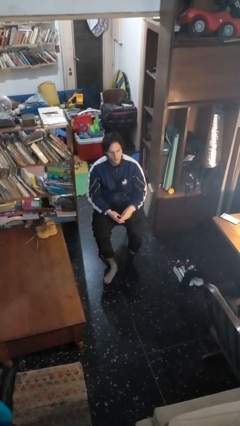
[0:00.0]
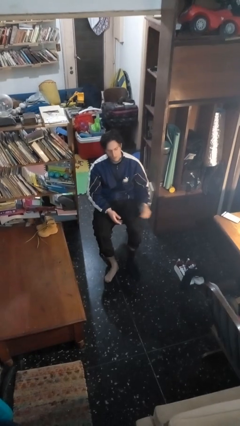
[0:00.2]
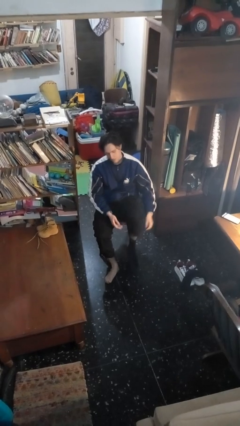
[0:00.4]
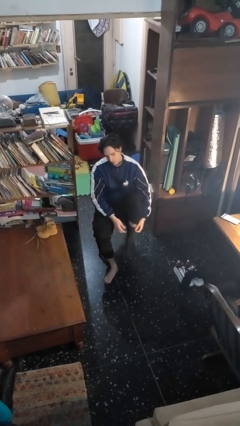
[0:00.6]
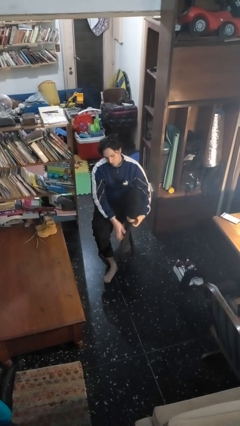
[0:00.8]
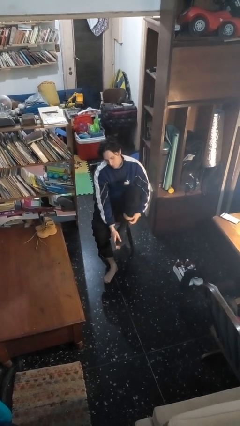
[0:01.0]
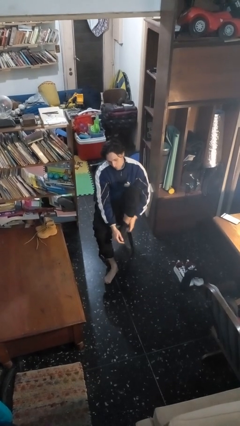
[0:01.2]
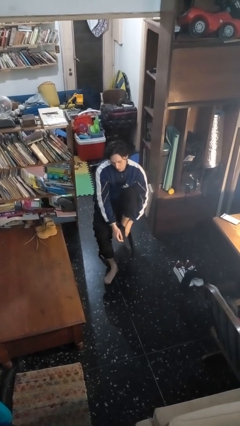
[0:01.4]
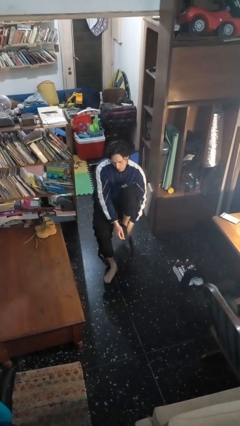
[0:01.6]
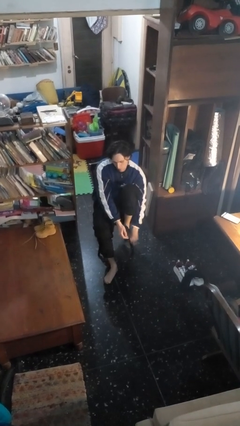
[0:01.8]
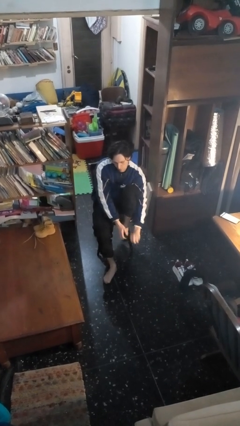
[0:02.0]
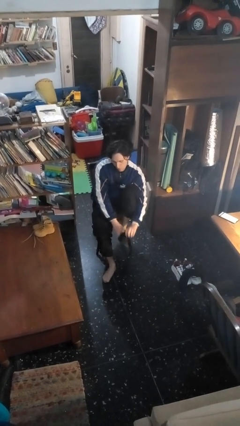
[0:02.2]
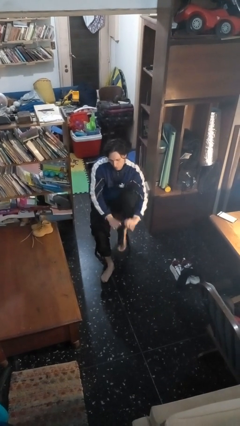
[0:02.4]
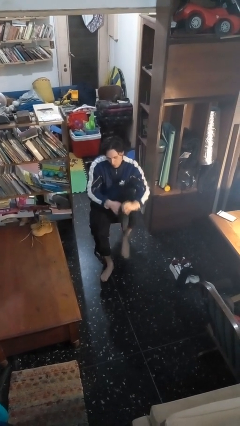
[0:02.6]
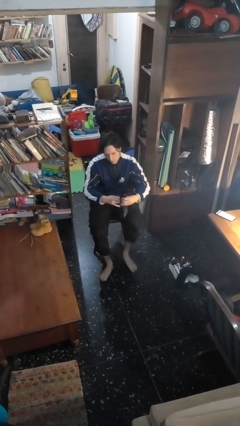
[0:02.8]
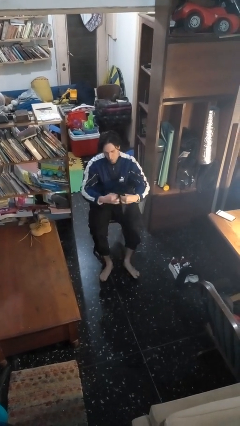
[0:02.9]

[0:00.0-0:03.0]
person takes off socks

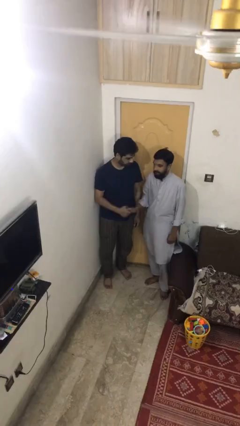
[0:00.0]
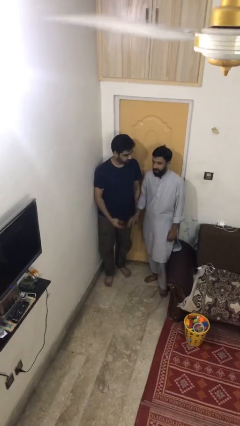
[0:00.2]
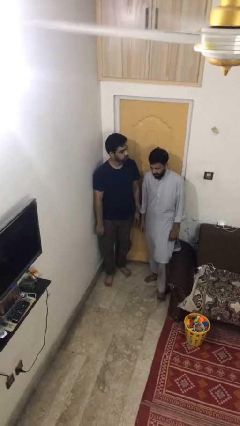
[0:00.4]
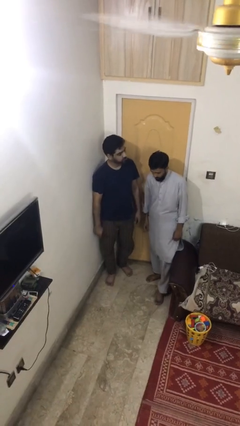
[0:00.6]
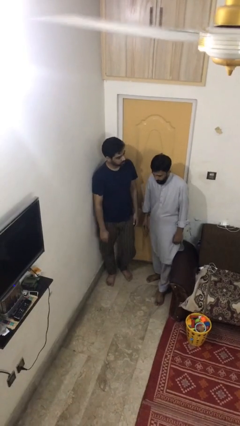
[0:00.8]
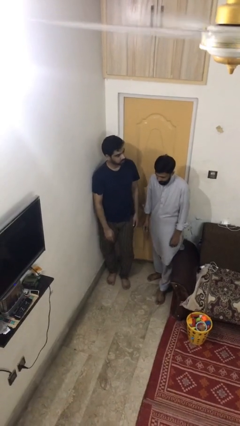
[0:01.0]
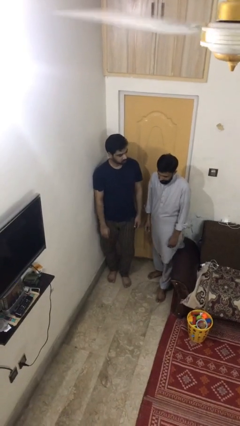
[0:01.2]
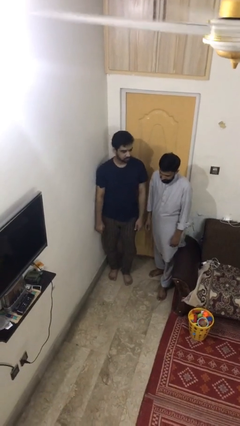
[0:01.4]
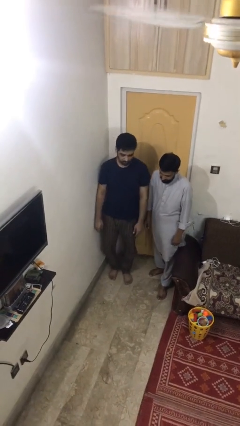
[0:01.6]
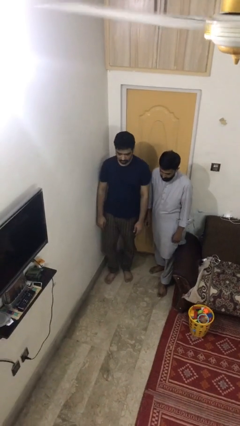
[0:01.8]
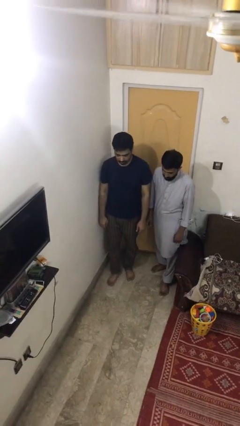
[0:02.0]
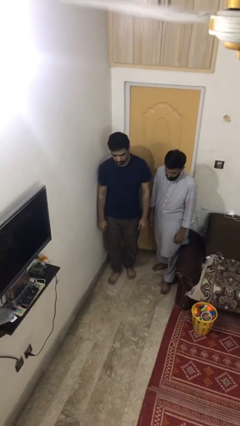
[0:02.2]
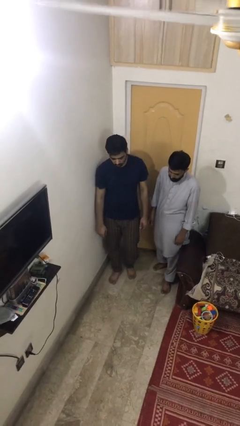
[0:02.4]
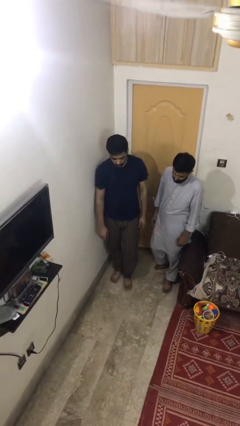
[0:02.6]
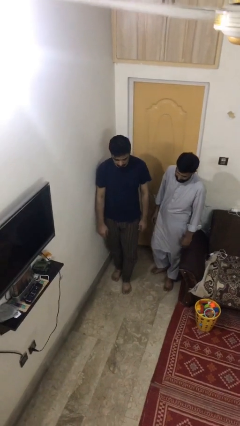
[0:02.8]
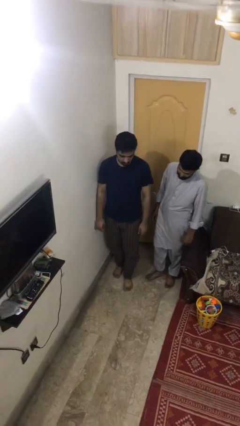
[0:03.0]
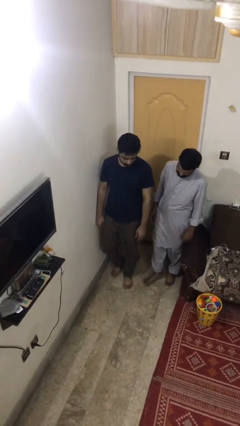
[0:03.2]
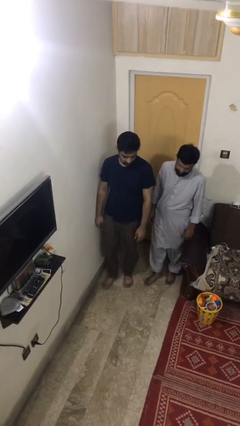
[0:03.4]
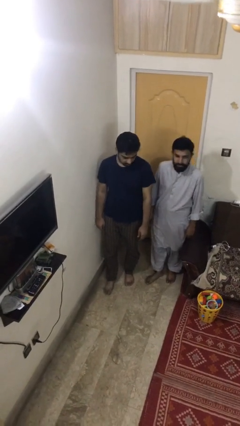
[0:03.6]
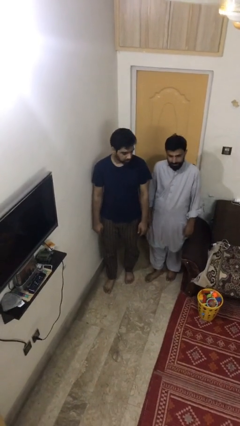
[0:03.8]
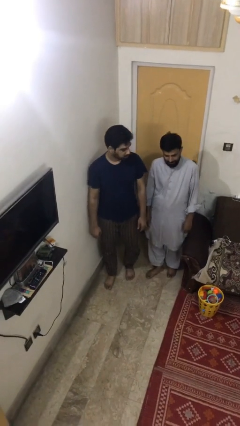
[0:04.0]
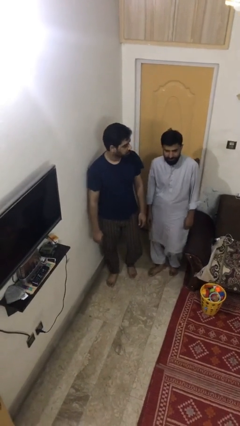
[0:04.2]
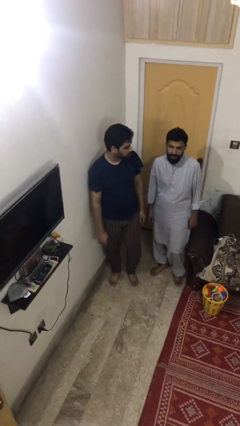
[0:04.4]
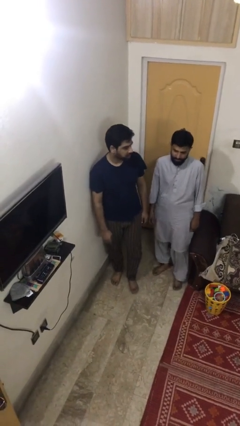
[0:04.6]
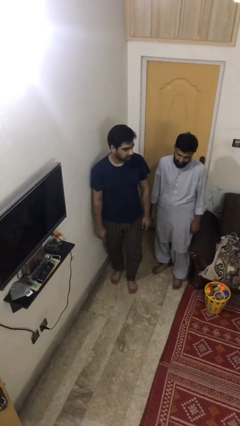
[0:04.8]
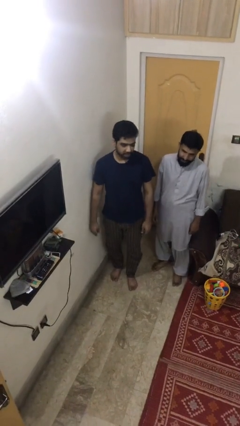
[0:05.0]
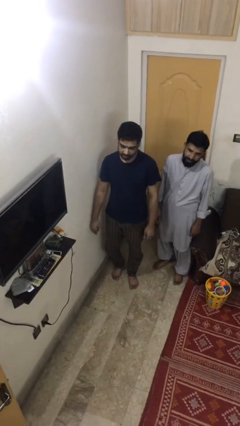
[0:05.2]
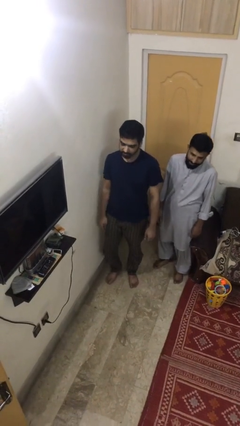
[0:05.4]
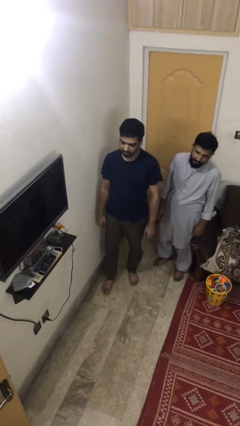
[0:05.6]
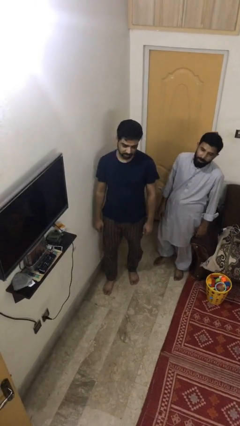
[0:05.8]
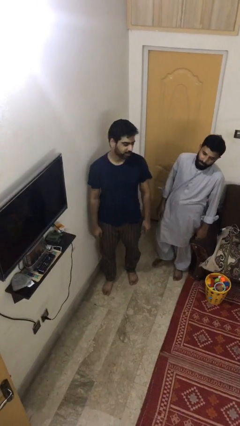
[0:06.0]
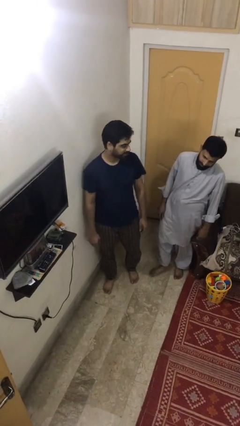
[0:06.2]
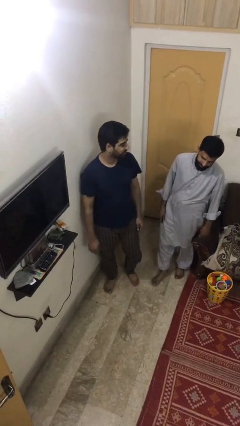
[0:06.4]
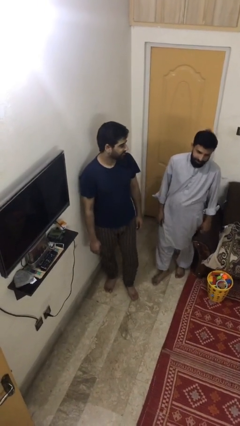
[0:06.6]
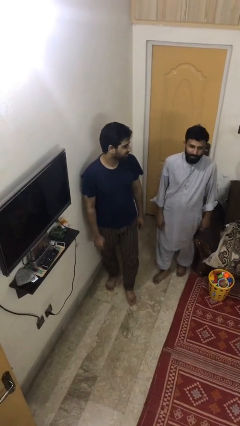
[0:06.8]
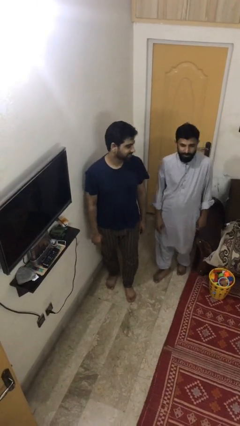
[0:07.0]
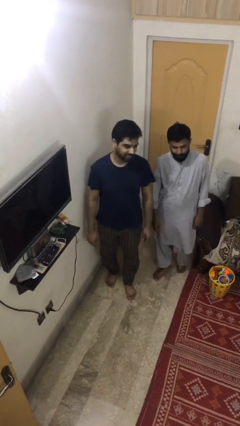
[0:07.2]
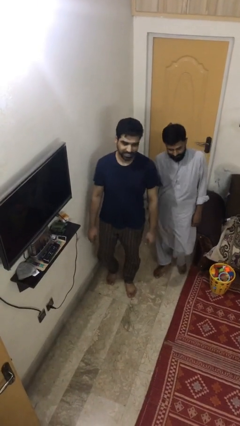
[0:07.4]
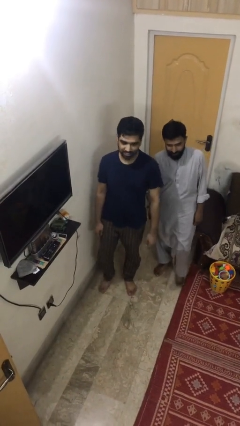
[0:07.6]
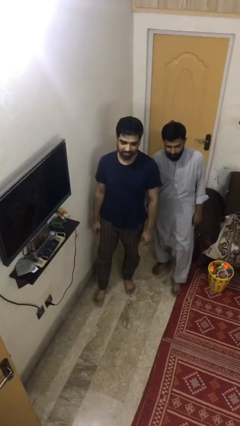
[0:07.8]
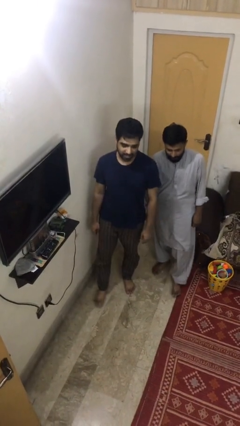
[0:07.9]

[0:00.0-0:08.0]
person talks to person

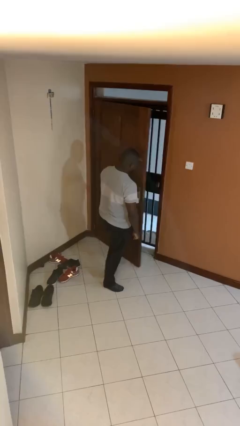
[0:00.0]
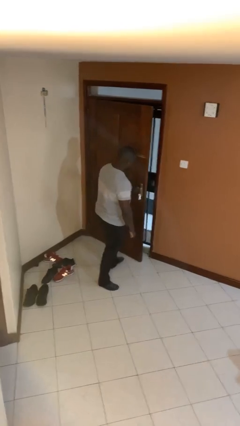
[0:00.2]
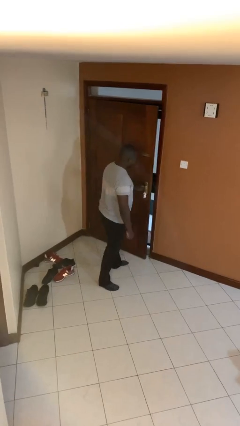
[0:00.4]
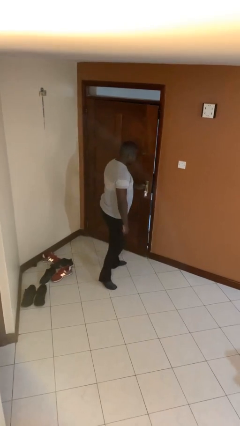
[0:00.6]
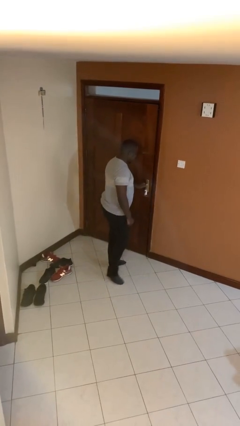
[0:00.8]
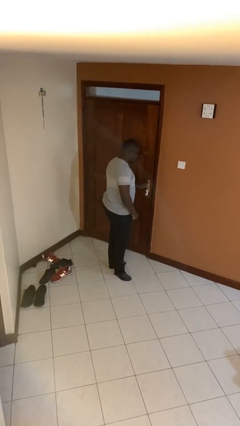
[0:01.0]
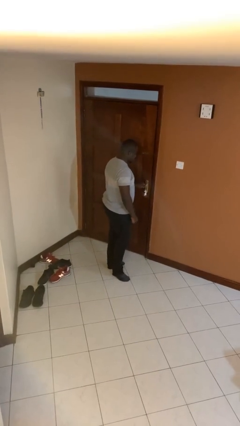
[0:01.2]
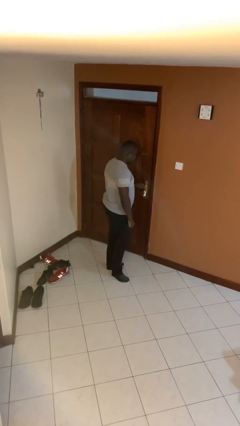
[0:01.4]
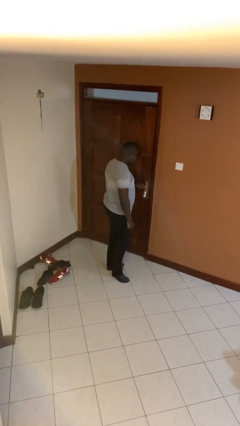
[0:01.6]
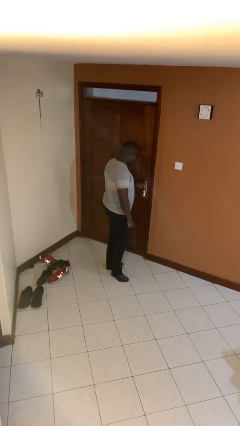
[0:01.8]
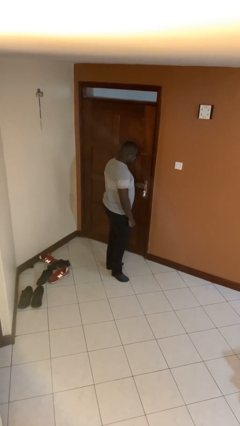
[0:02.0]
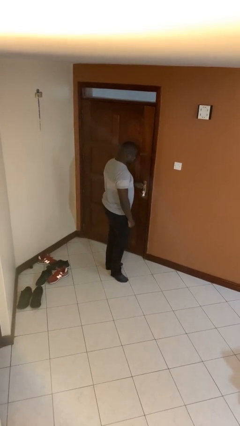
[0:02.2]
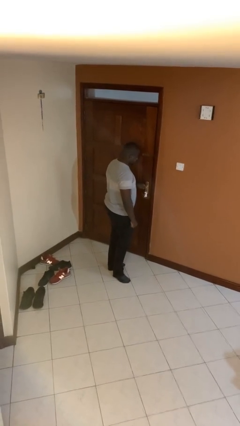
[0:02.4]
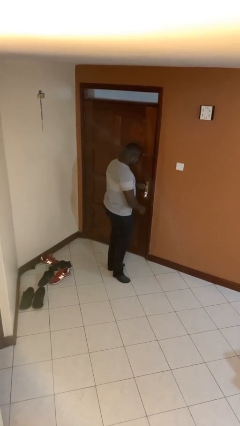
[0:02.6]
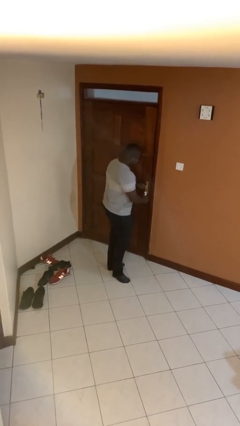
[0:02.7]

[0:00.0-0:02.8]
person closes facility door

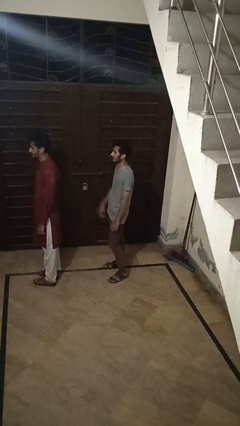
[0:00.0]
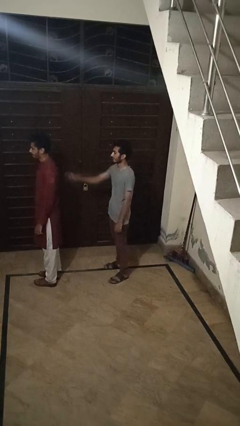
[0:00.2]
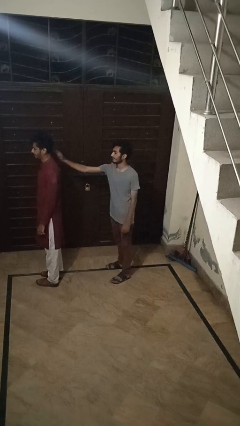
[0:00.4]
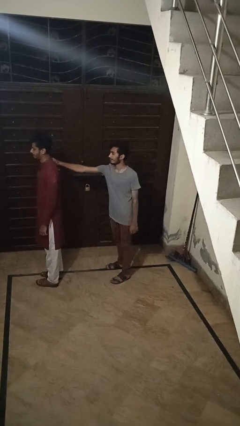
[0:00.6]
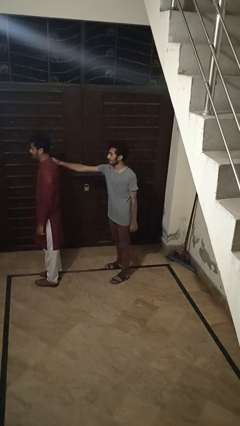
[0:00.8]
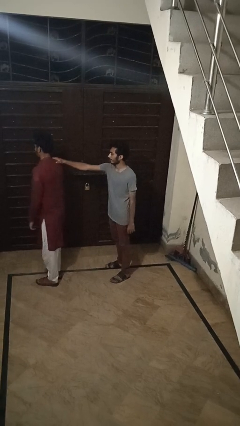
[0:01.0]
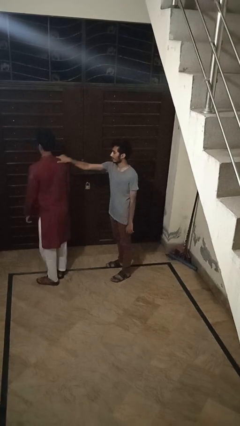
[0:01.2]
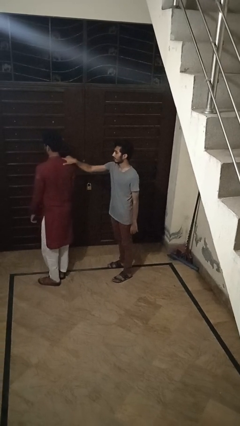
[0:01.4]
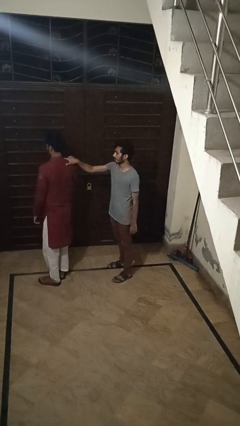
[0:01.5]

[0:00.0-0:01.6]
person grabs person by shoulder

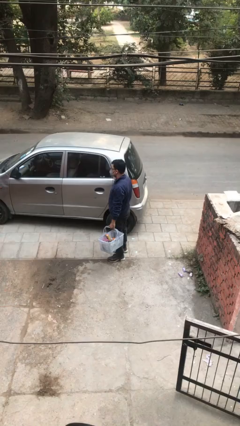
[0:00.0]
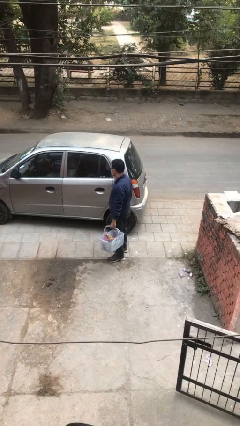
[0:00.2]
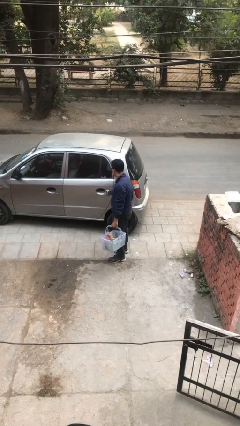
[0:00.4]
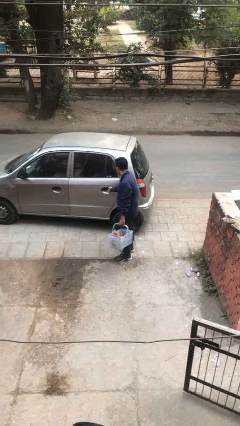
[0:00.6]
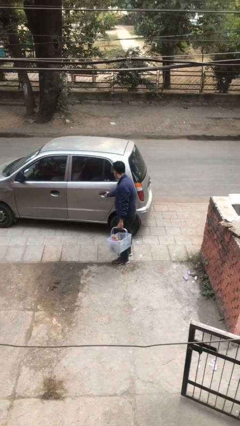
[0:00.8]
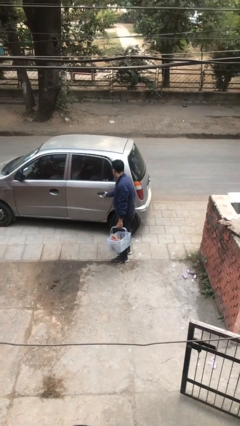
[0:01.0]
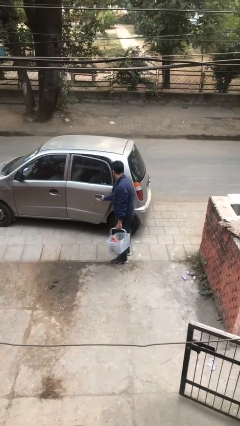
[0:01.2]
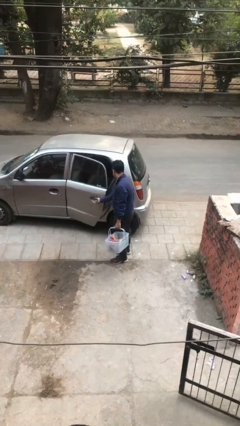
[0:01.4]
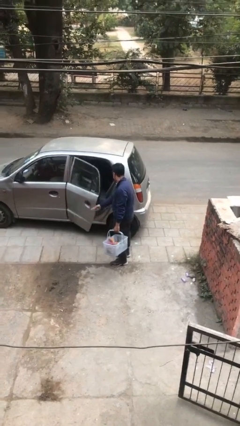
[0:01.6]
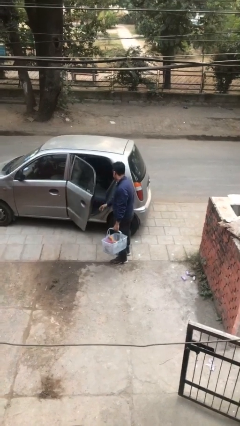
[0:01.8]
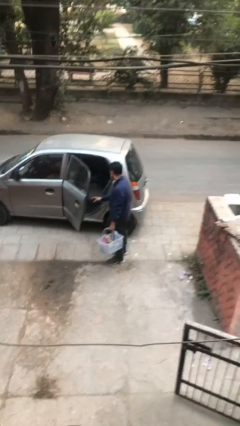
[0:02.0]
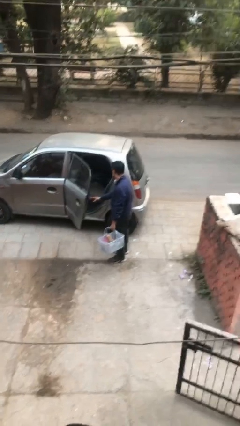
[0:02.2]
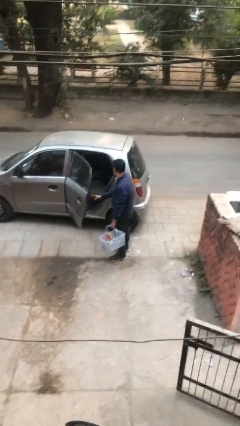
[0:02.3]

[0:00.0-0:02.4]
person opens car door
